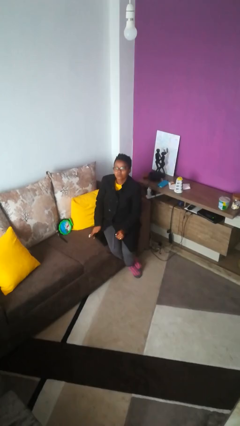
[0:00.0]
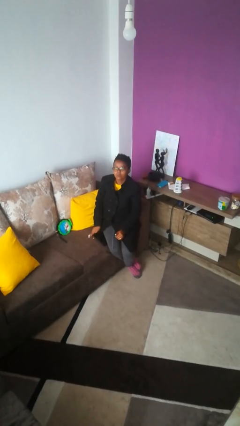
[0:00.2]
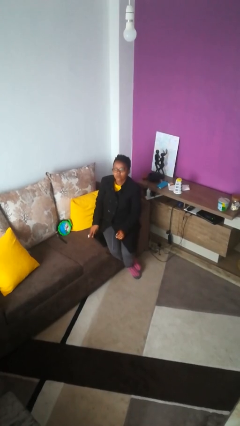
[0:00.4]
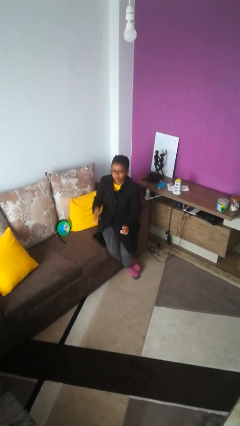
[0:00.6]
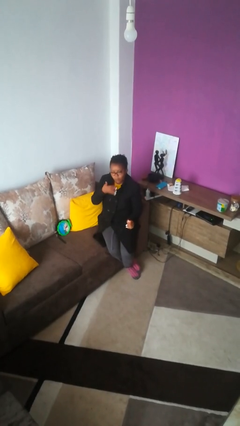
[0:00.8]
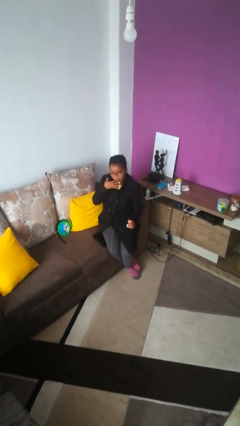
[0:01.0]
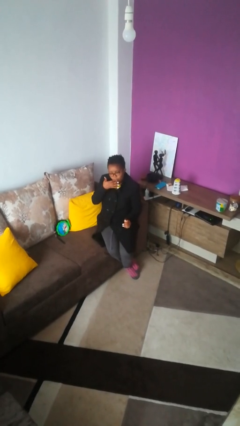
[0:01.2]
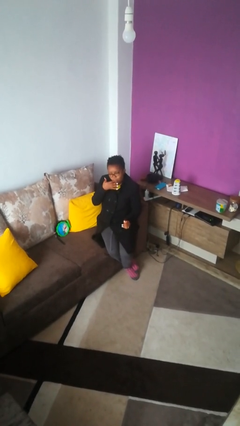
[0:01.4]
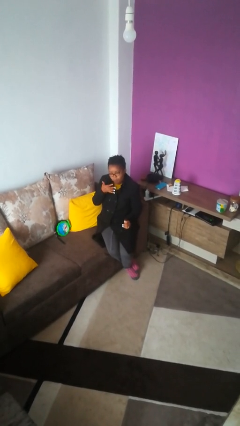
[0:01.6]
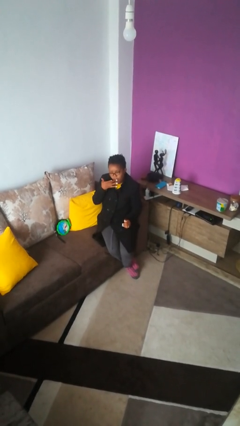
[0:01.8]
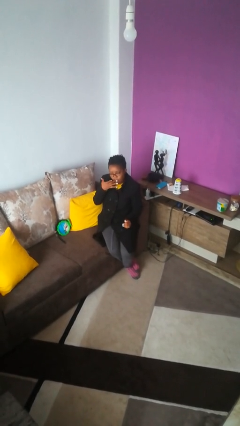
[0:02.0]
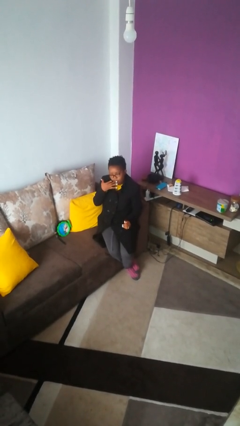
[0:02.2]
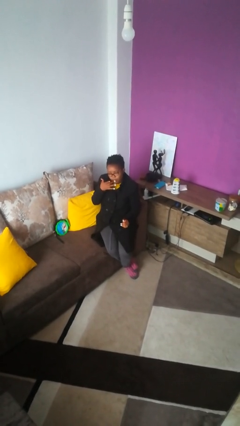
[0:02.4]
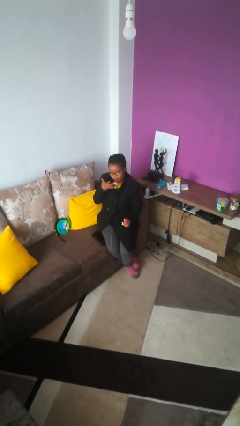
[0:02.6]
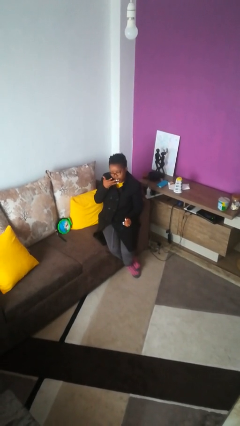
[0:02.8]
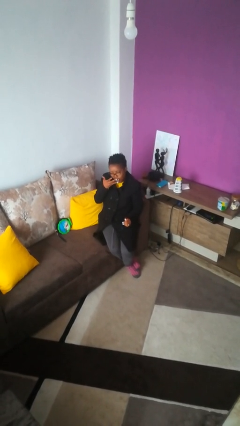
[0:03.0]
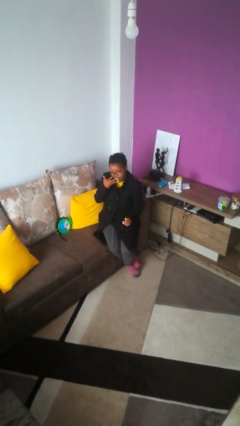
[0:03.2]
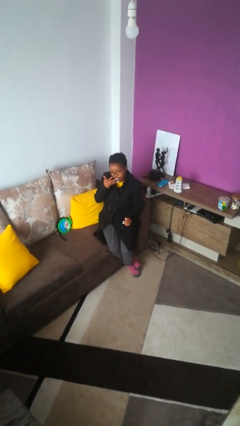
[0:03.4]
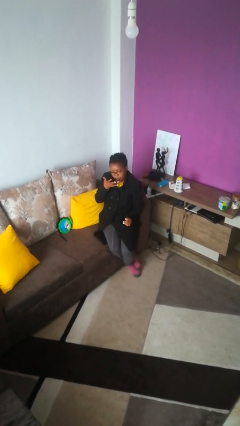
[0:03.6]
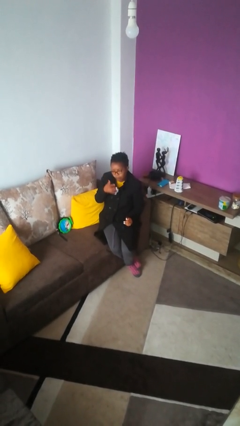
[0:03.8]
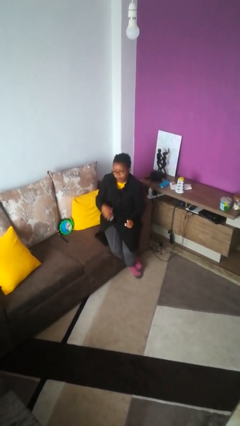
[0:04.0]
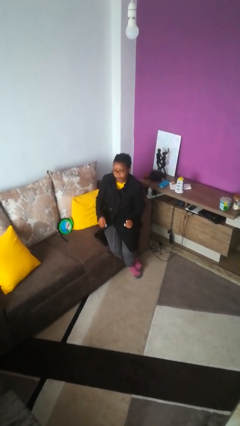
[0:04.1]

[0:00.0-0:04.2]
person licks fingers

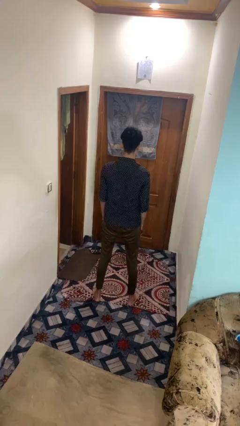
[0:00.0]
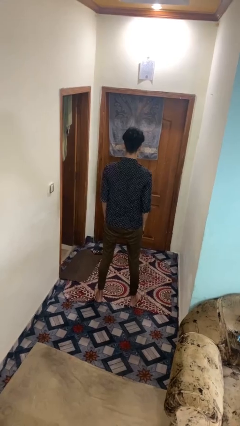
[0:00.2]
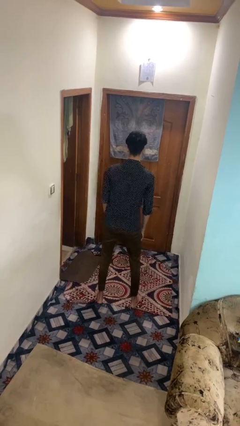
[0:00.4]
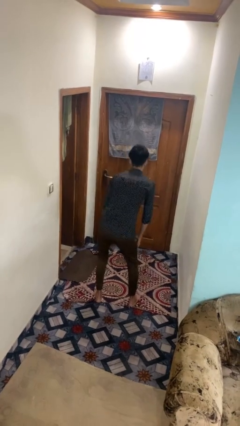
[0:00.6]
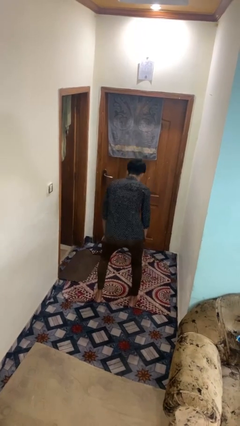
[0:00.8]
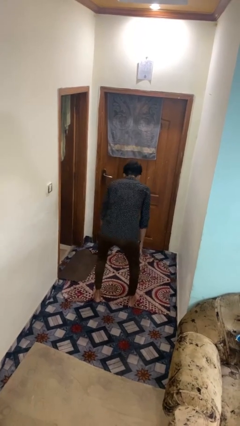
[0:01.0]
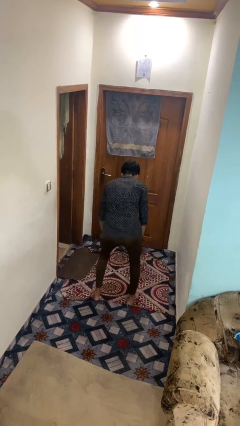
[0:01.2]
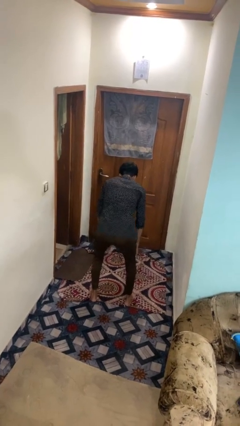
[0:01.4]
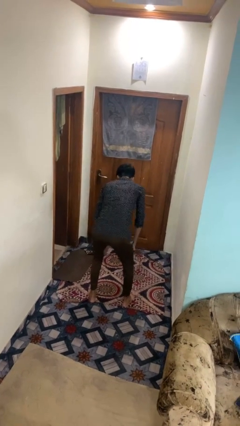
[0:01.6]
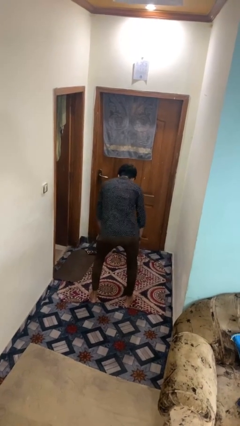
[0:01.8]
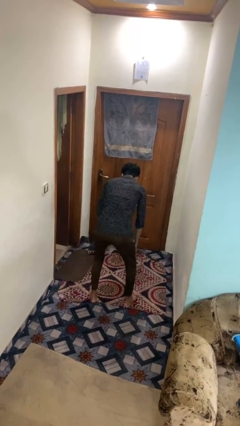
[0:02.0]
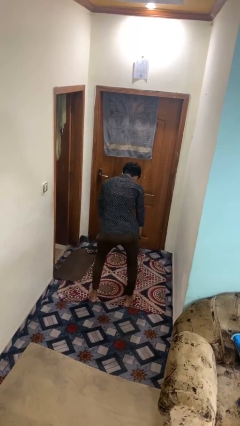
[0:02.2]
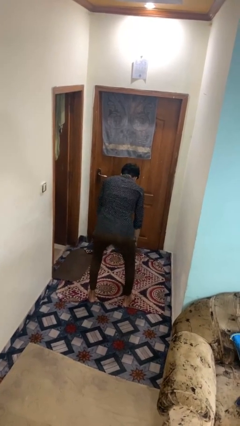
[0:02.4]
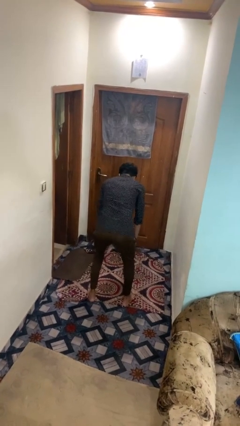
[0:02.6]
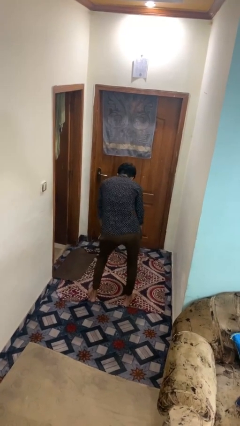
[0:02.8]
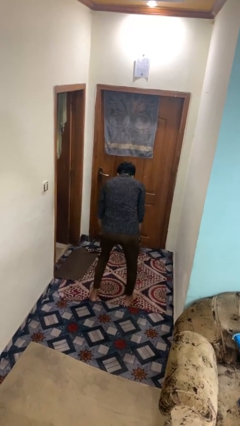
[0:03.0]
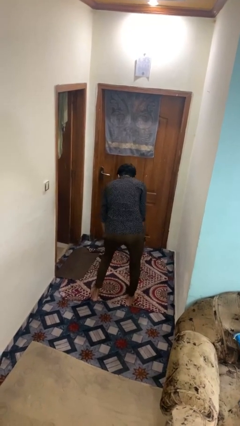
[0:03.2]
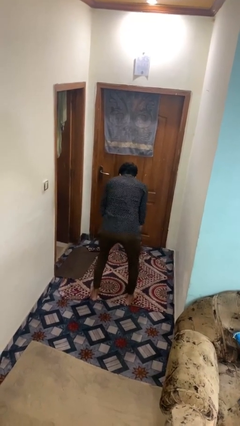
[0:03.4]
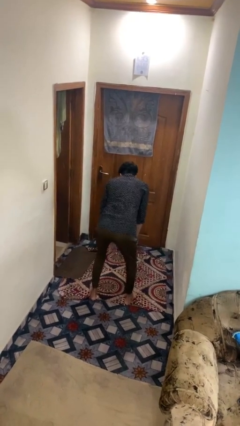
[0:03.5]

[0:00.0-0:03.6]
person wiggles hips

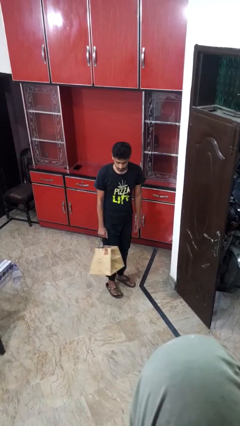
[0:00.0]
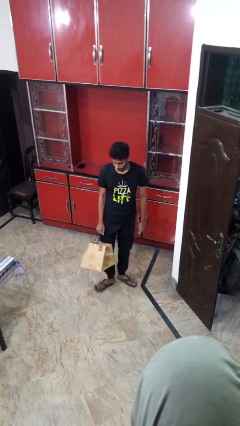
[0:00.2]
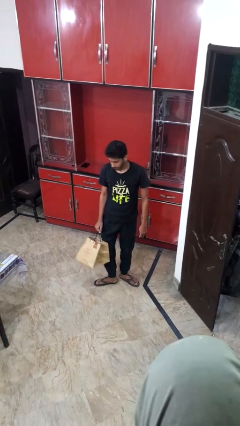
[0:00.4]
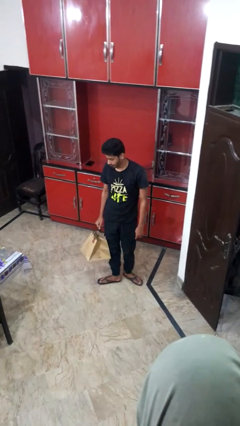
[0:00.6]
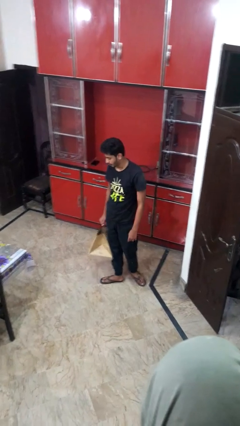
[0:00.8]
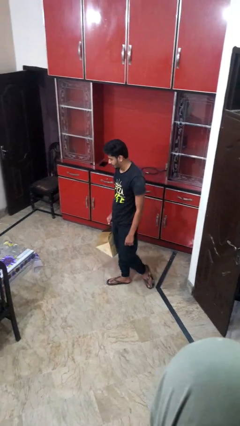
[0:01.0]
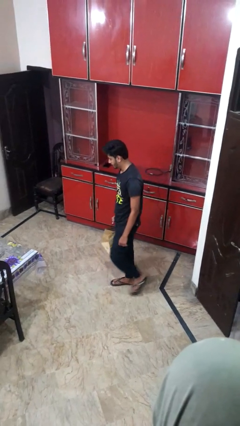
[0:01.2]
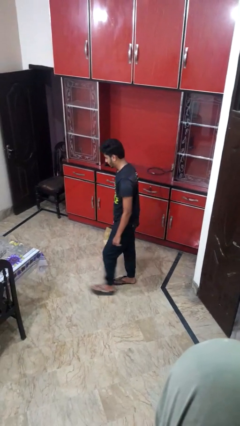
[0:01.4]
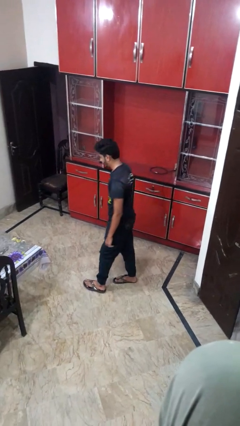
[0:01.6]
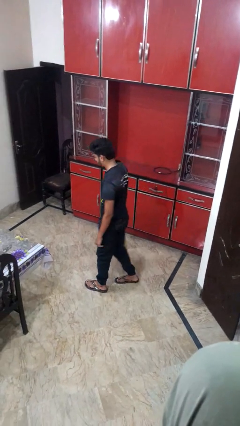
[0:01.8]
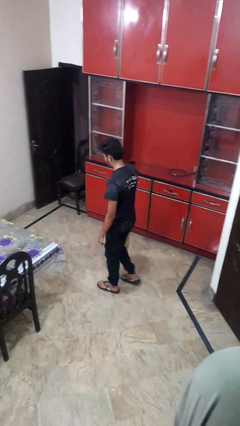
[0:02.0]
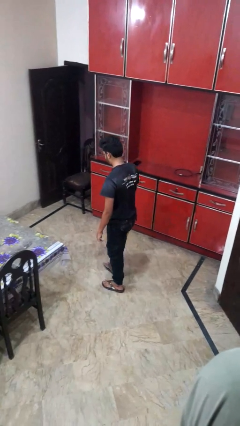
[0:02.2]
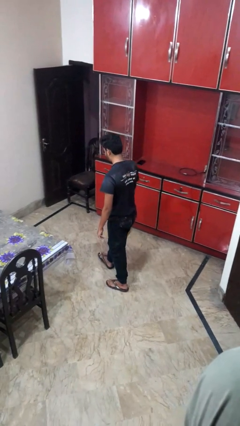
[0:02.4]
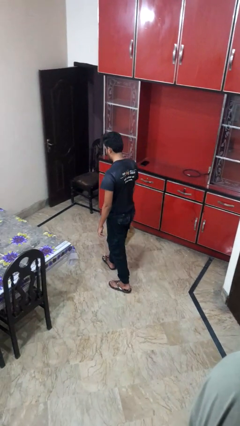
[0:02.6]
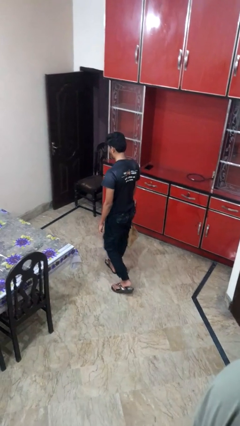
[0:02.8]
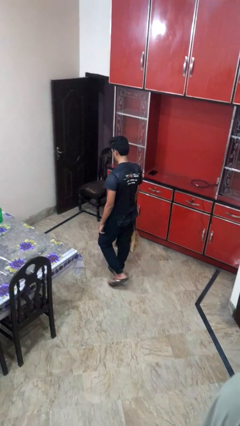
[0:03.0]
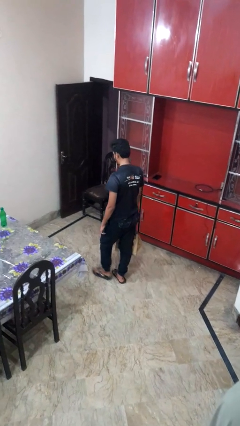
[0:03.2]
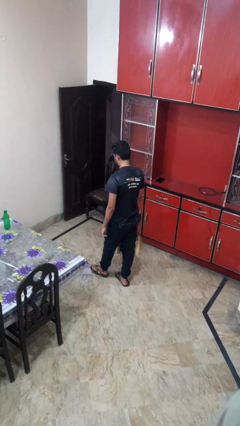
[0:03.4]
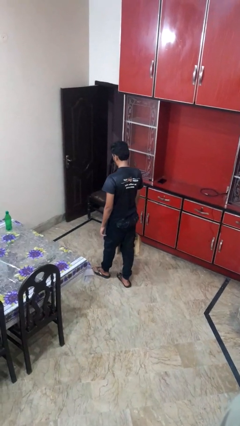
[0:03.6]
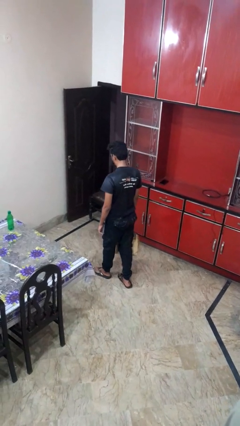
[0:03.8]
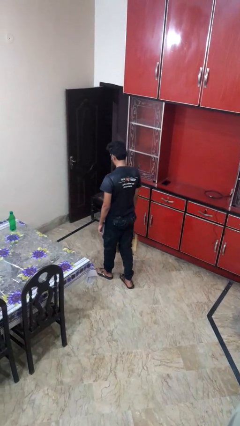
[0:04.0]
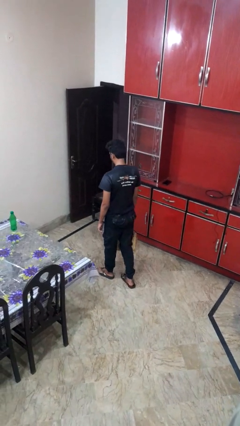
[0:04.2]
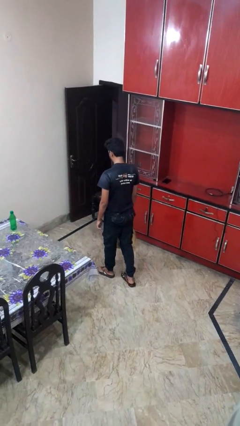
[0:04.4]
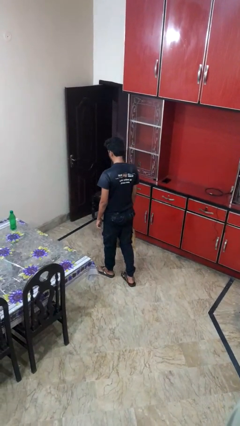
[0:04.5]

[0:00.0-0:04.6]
person carries groceries

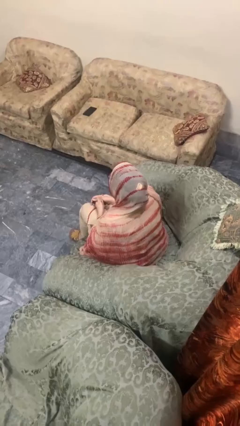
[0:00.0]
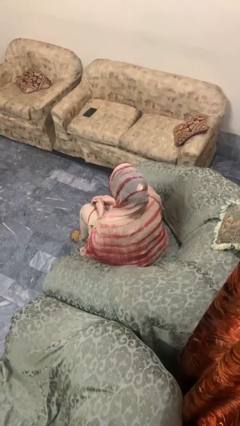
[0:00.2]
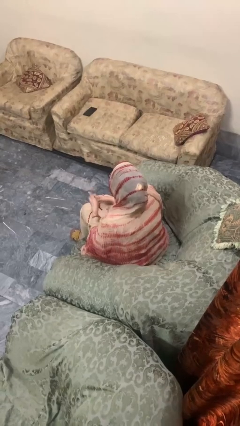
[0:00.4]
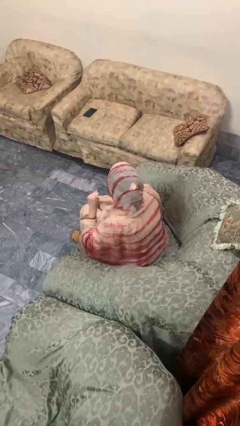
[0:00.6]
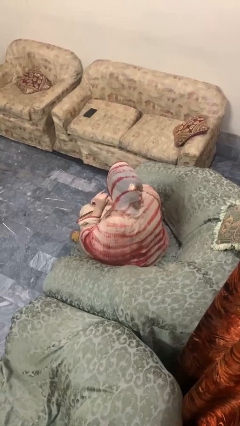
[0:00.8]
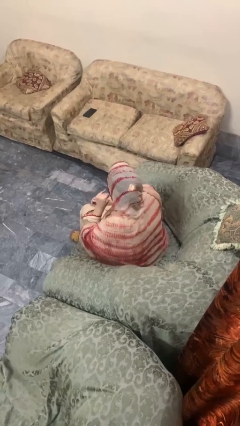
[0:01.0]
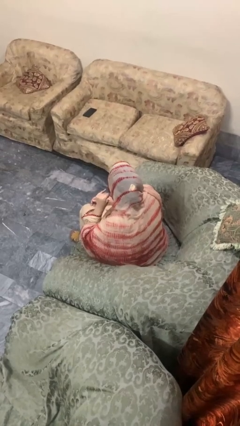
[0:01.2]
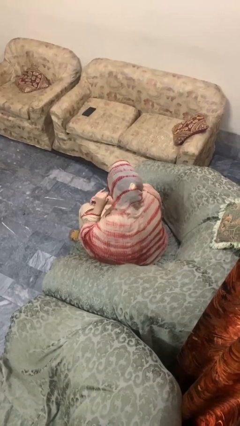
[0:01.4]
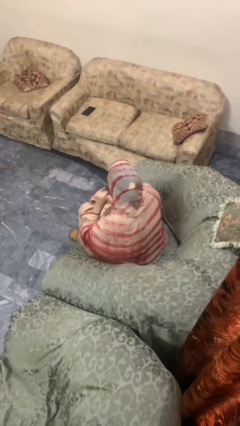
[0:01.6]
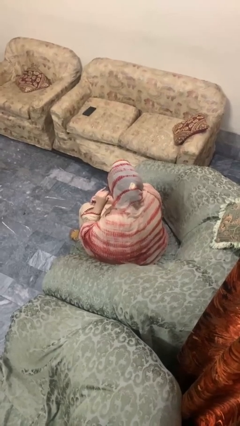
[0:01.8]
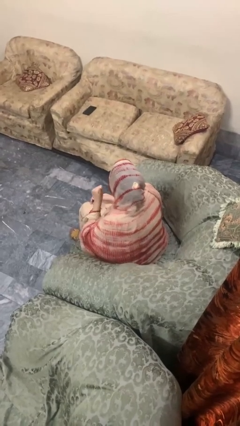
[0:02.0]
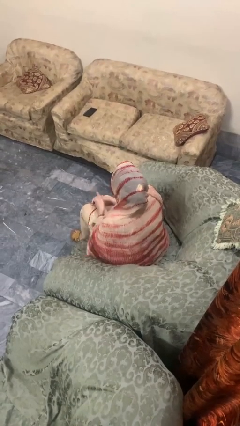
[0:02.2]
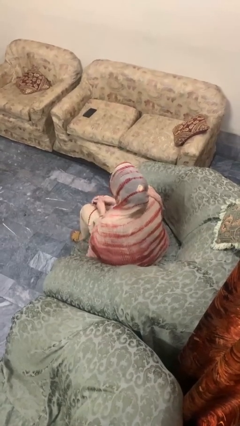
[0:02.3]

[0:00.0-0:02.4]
person gestures call me

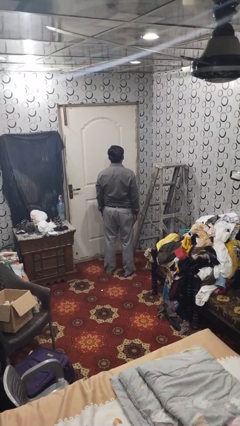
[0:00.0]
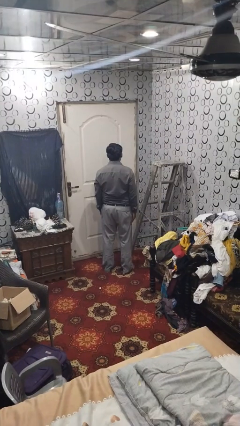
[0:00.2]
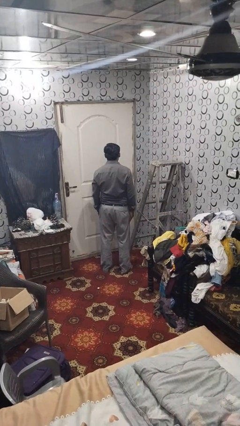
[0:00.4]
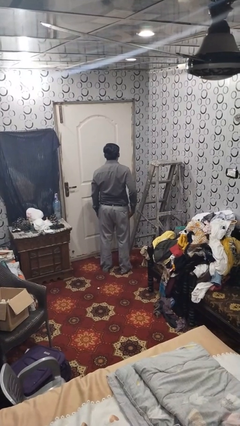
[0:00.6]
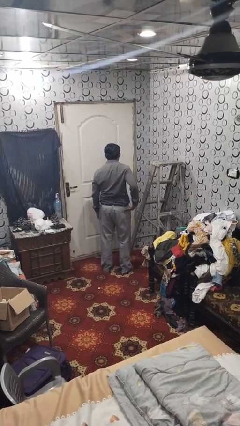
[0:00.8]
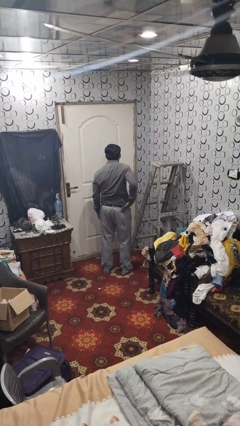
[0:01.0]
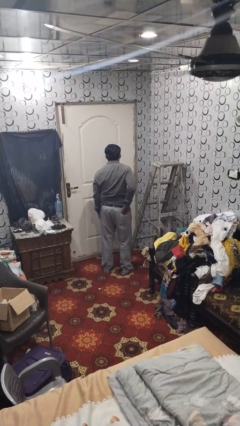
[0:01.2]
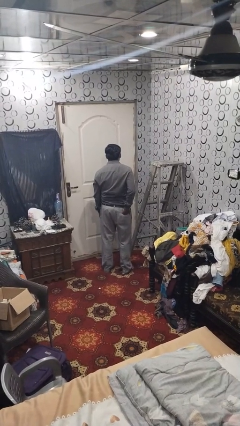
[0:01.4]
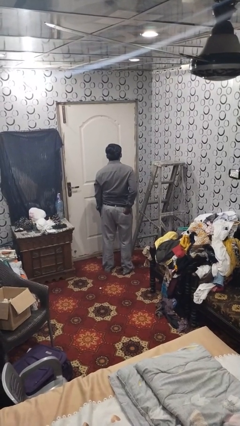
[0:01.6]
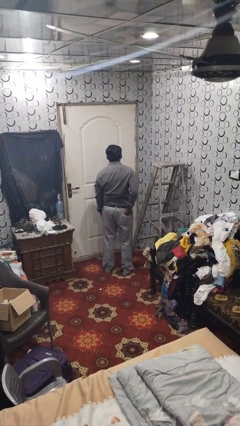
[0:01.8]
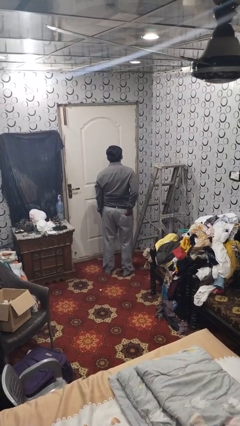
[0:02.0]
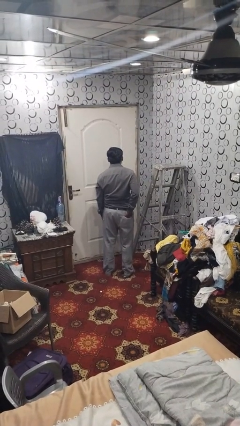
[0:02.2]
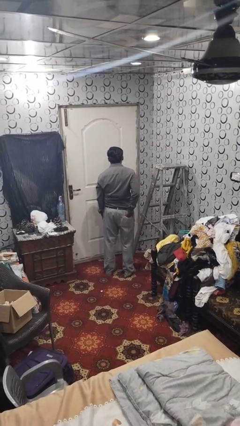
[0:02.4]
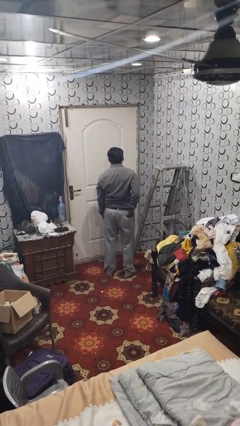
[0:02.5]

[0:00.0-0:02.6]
person puts hands in back pockets
